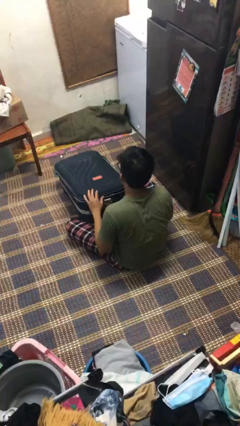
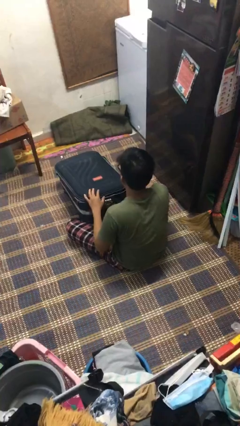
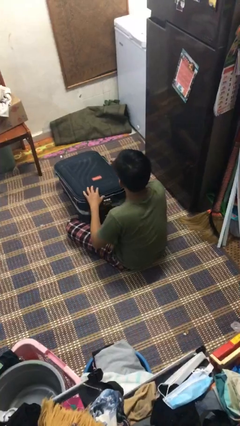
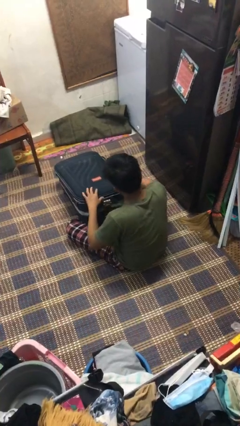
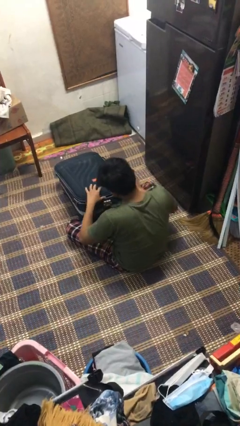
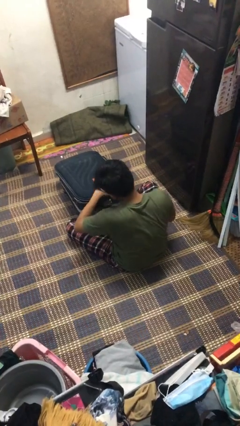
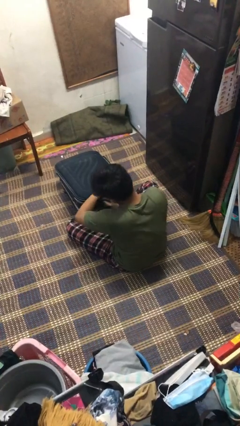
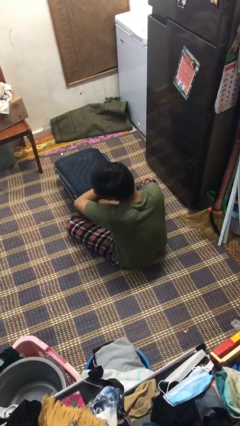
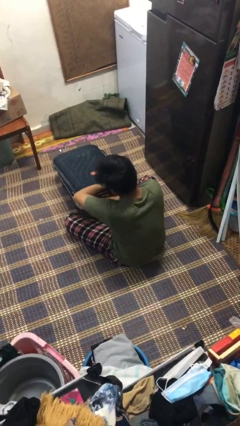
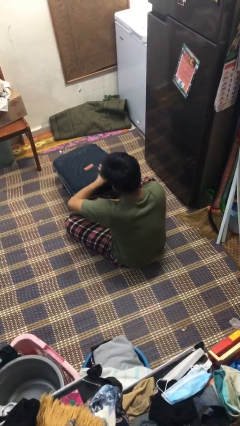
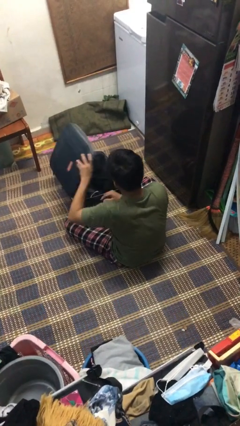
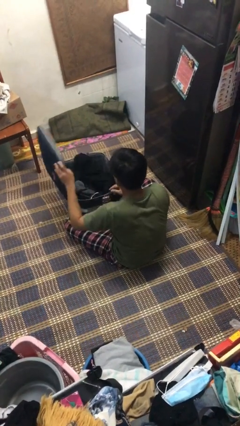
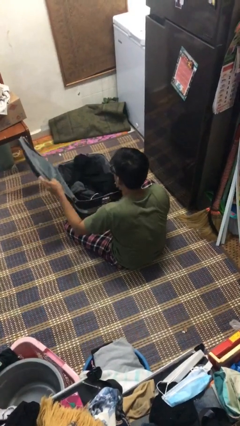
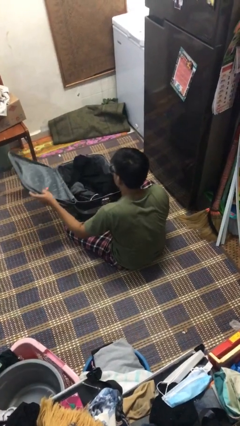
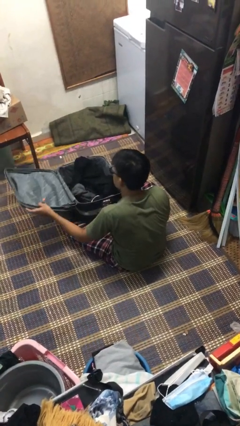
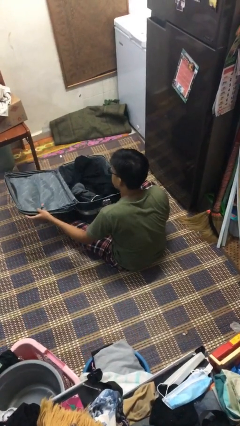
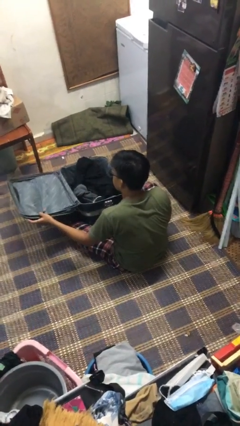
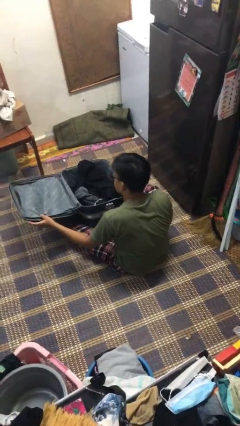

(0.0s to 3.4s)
person opens suitcase

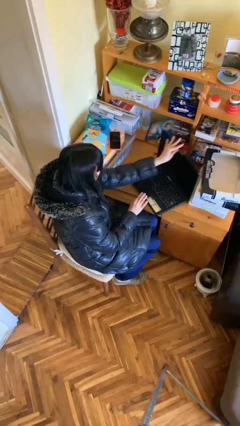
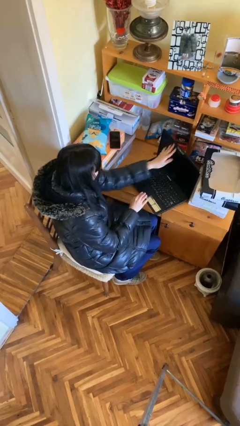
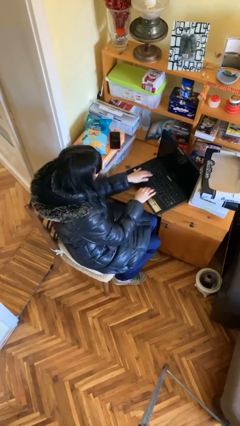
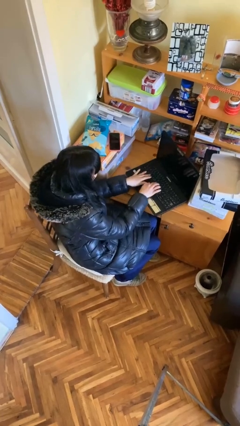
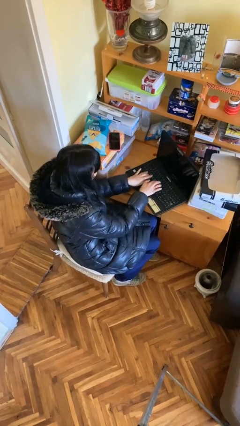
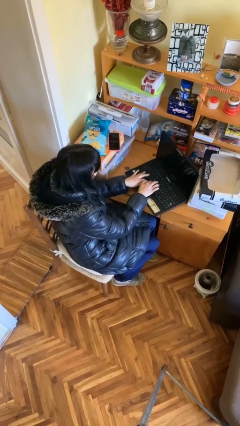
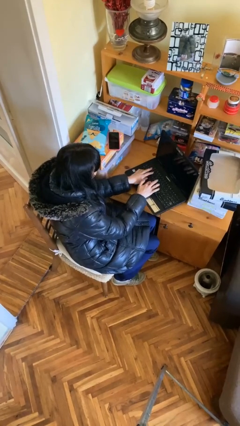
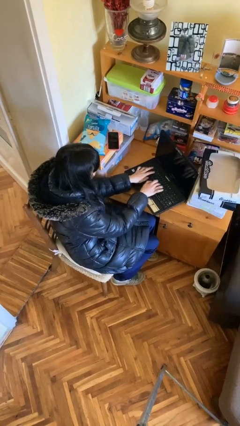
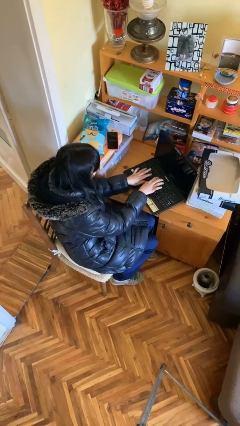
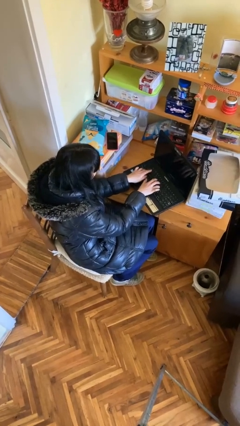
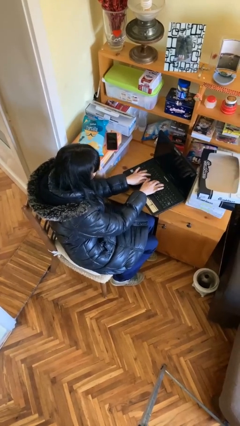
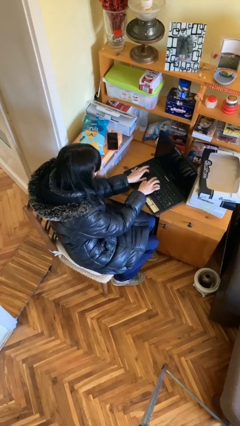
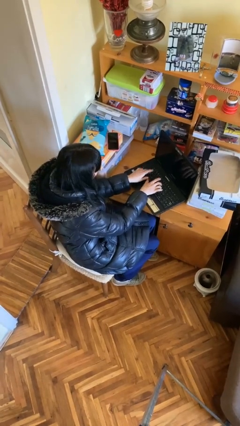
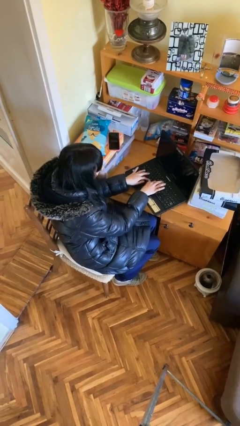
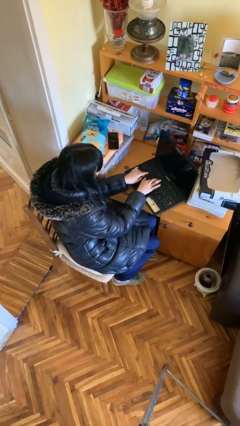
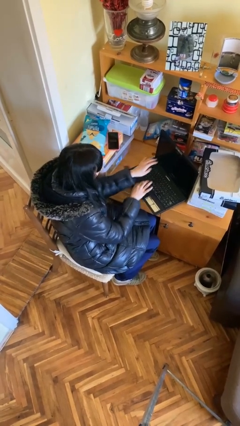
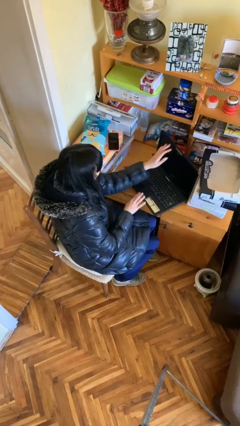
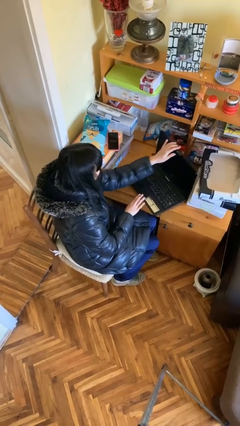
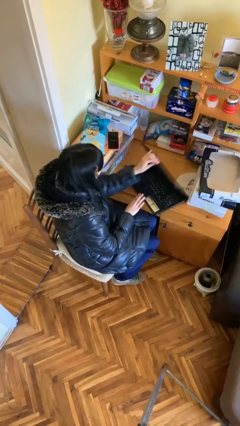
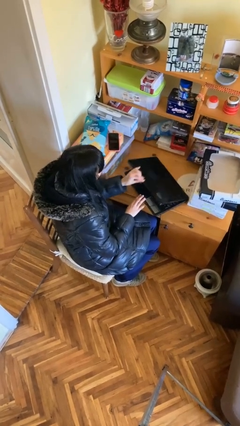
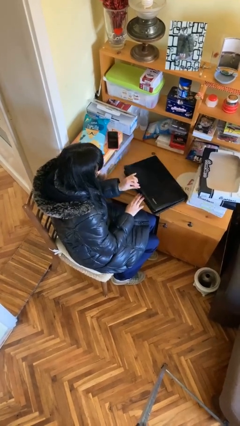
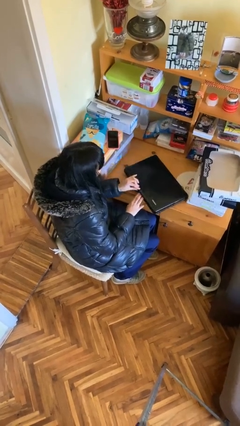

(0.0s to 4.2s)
person interacts with laptop

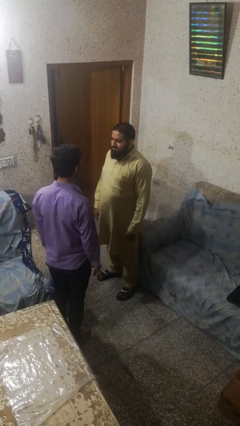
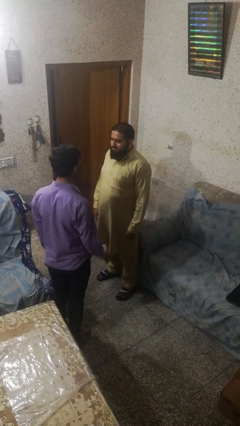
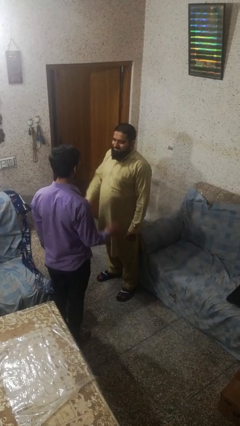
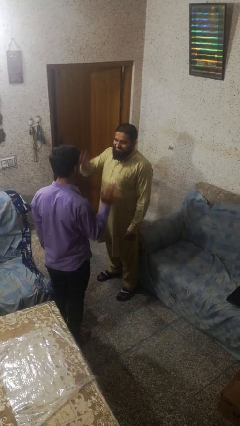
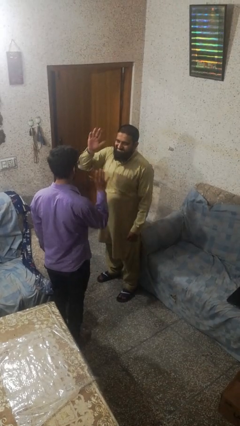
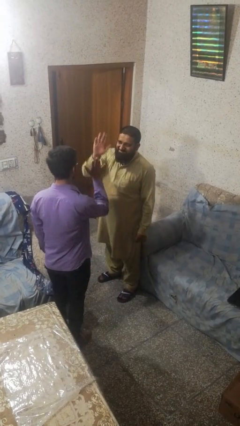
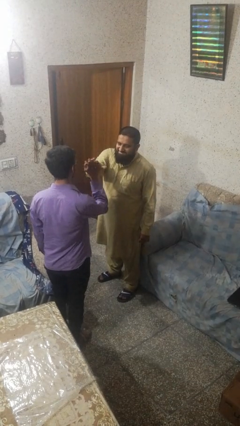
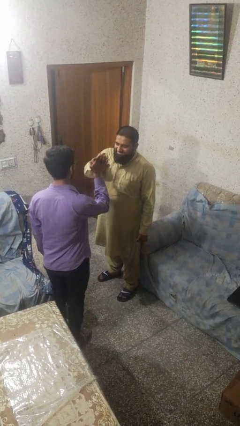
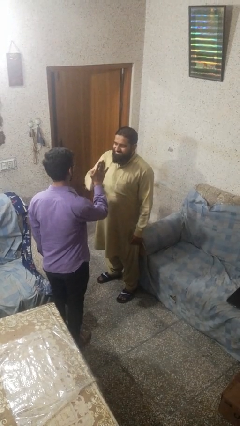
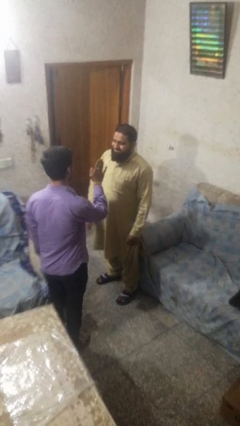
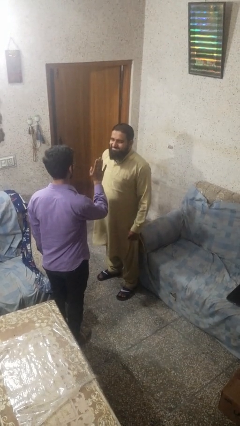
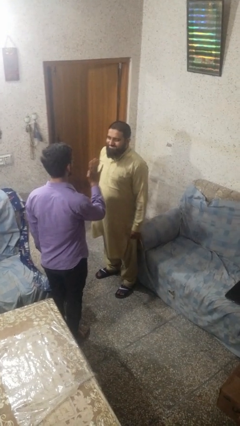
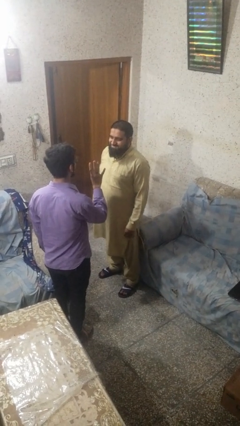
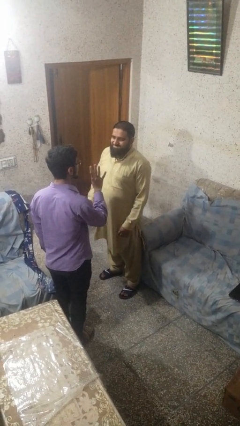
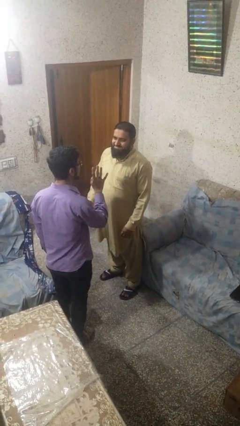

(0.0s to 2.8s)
person highfives hand

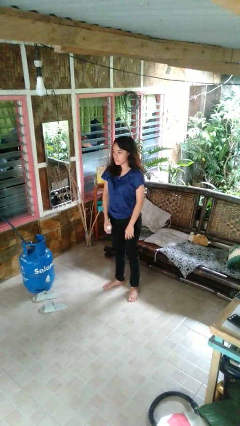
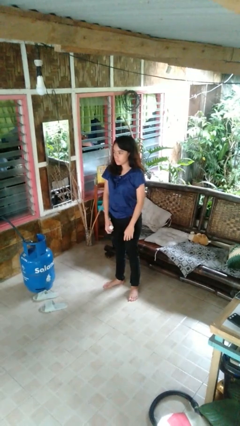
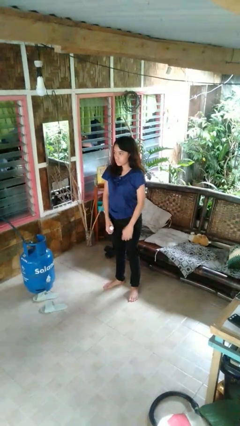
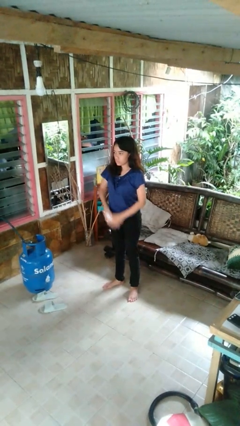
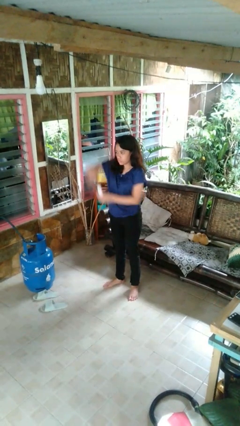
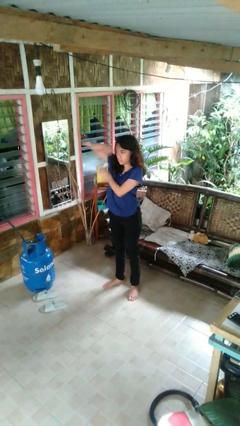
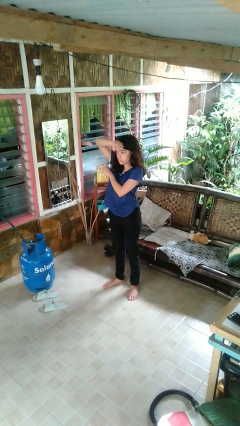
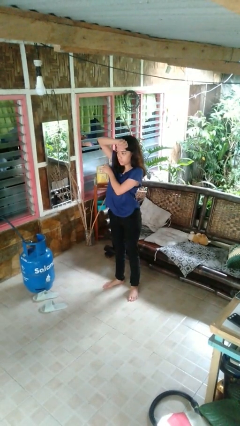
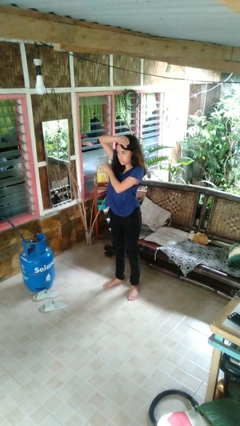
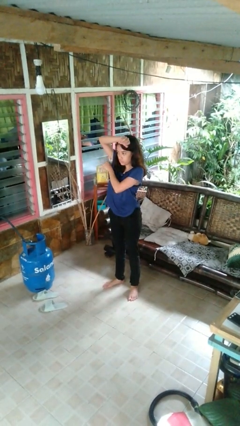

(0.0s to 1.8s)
person applies deodorant

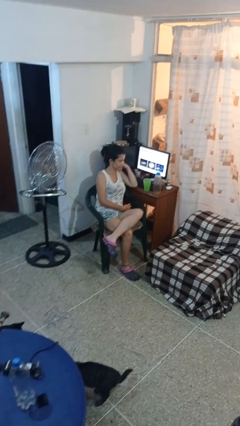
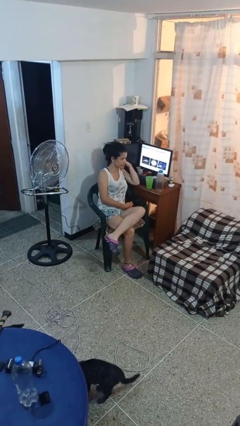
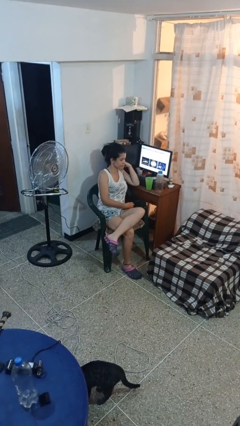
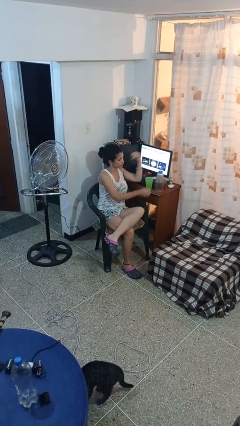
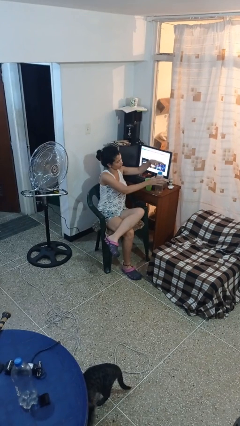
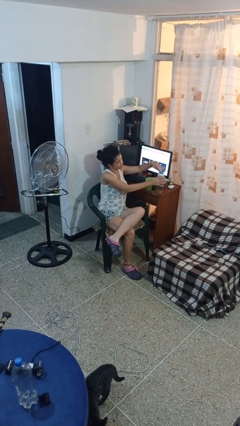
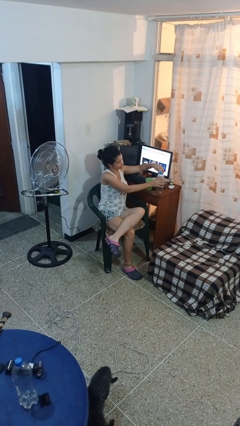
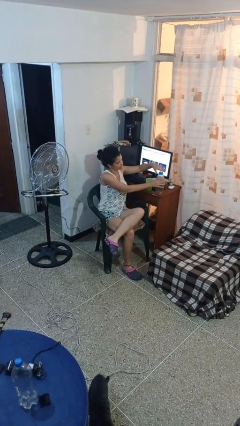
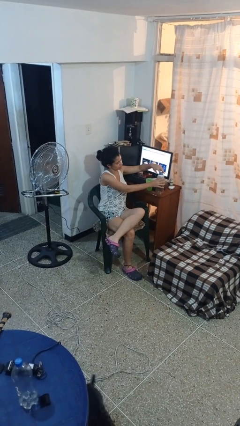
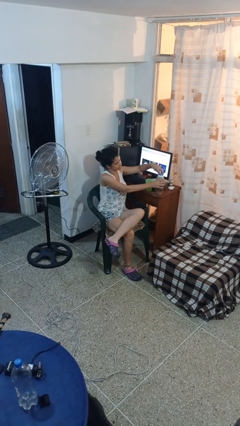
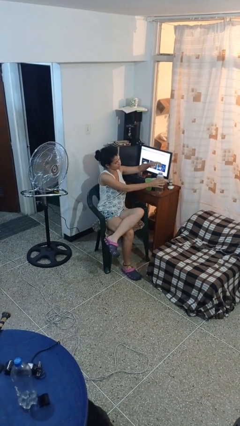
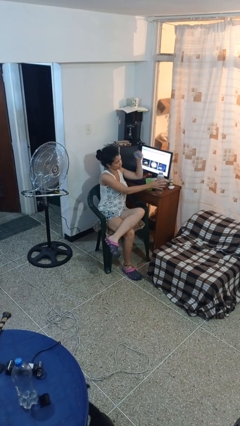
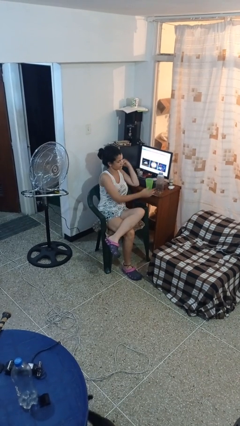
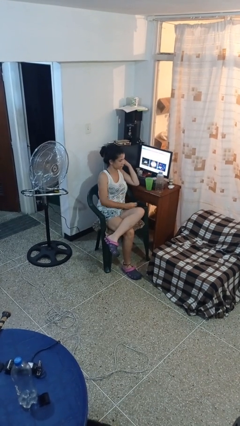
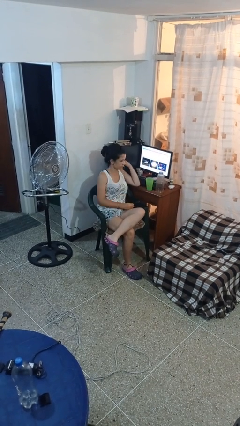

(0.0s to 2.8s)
person unscrews lid from bottle

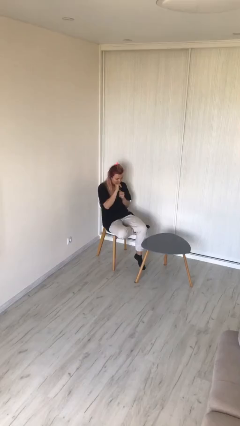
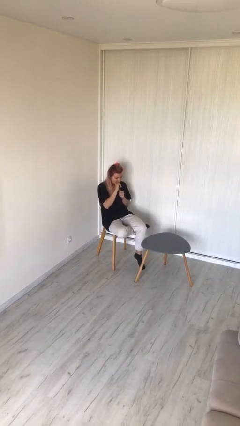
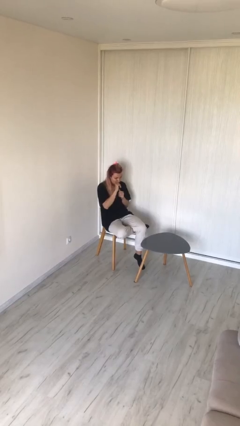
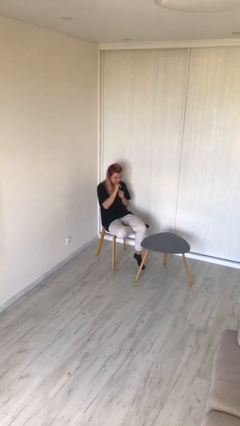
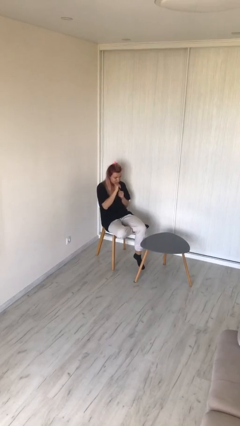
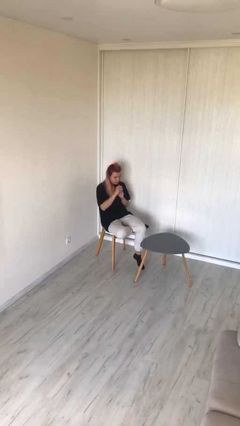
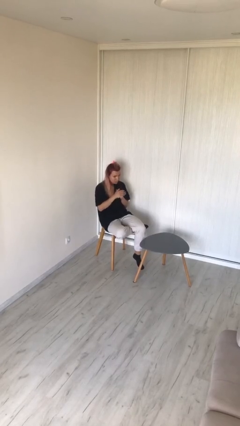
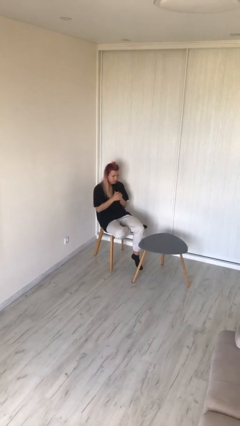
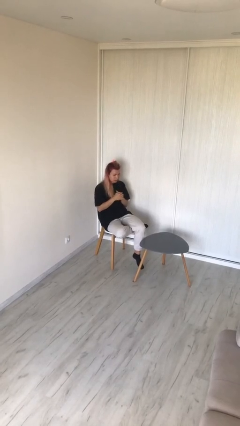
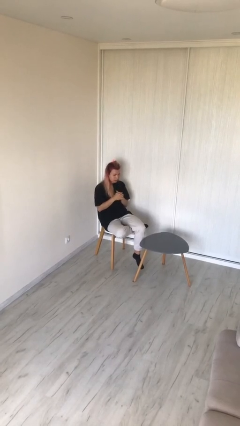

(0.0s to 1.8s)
person licks fingers

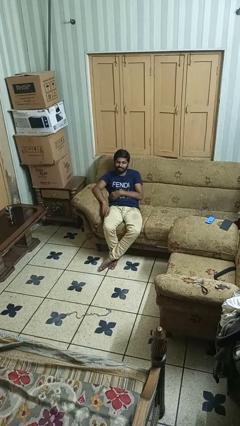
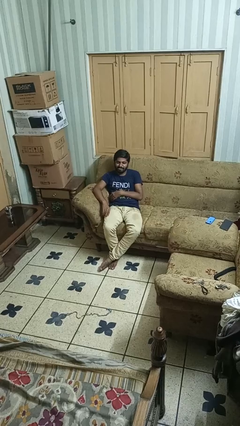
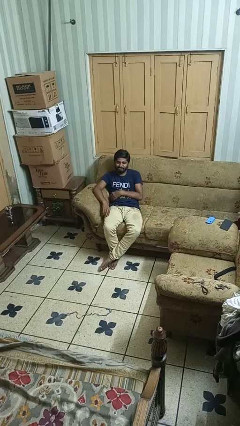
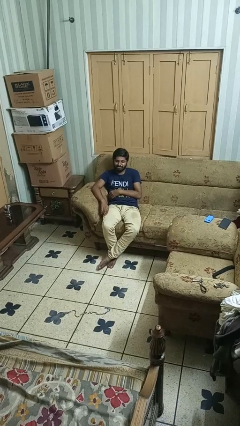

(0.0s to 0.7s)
person strokes chin
